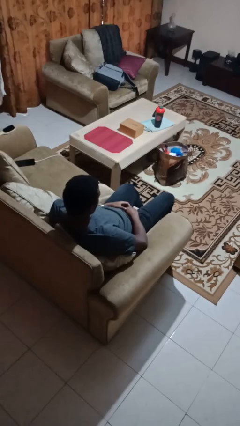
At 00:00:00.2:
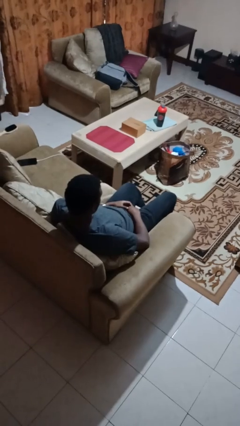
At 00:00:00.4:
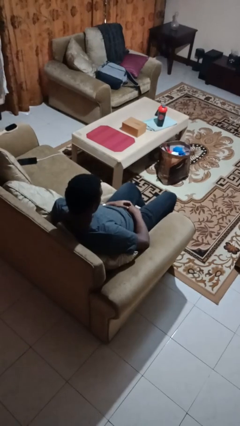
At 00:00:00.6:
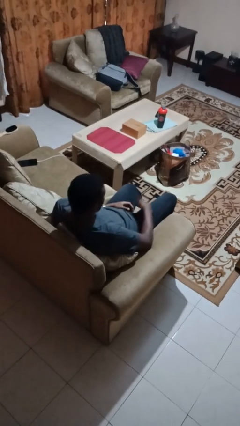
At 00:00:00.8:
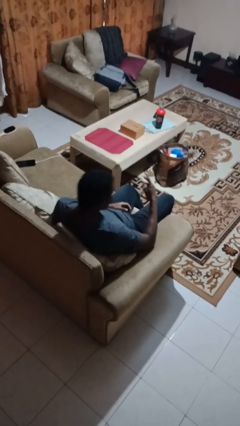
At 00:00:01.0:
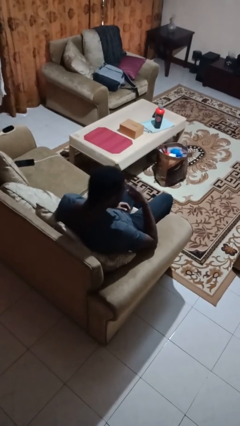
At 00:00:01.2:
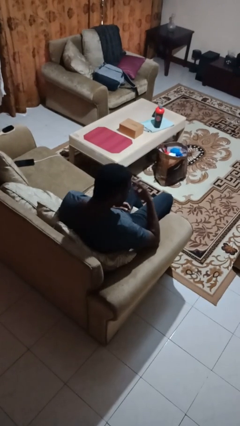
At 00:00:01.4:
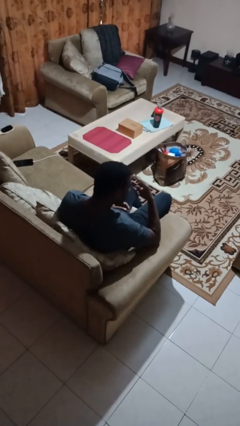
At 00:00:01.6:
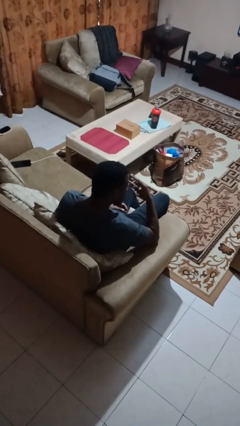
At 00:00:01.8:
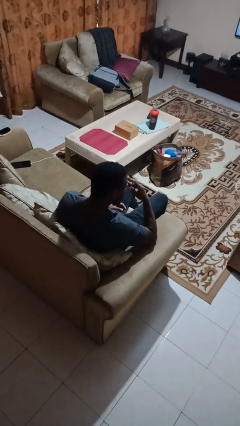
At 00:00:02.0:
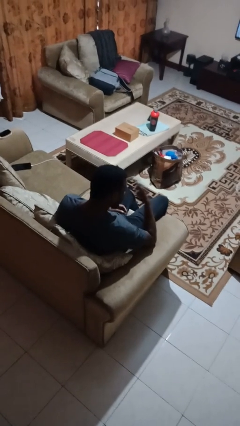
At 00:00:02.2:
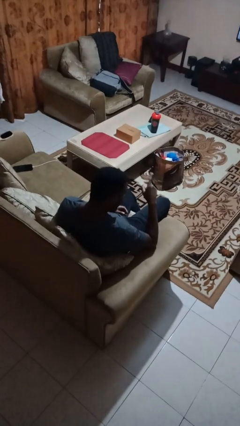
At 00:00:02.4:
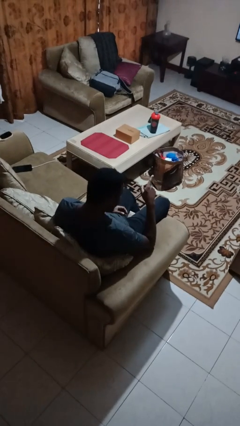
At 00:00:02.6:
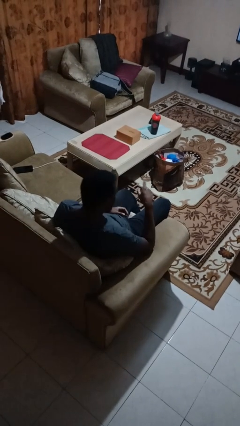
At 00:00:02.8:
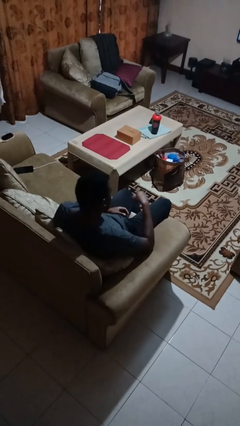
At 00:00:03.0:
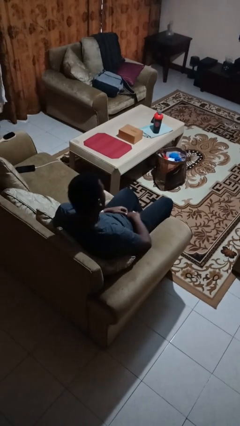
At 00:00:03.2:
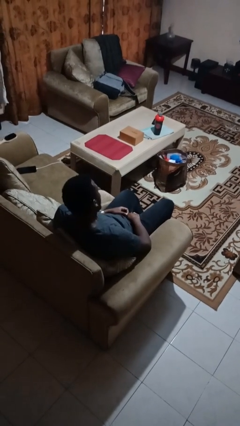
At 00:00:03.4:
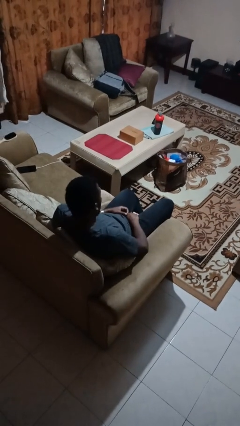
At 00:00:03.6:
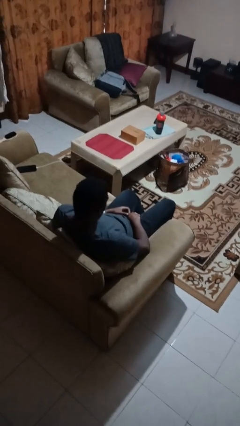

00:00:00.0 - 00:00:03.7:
person gestures watch closely

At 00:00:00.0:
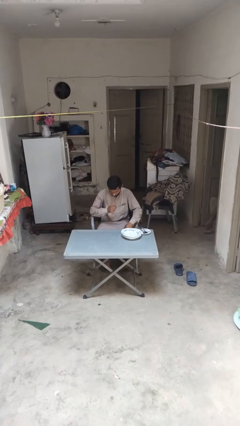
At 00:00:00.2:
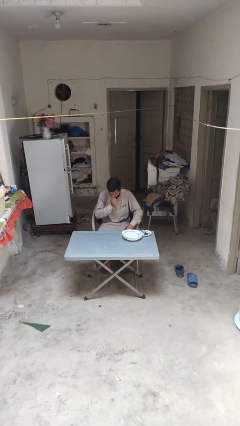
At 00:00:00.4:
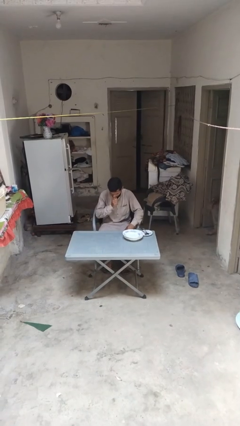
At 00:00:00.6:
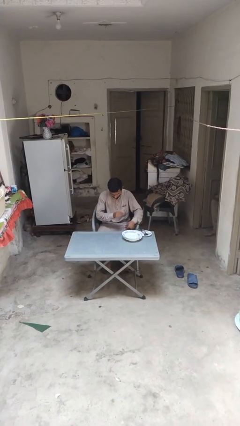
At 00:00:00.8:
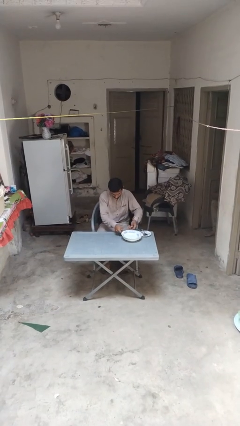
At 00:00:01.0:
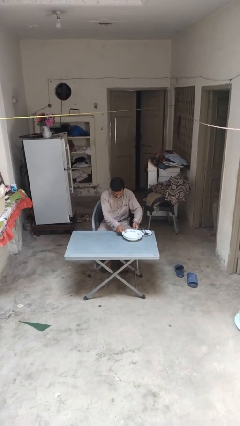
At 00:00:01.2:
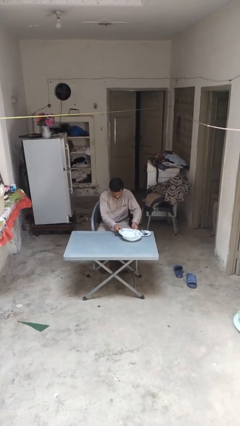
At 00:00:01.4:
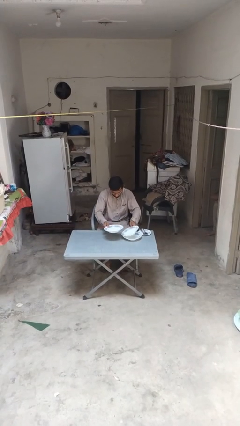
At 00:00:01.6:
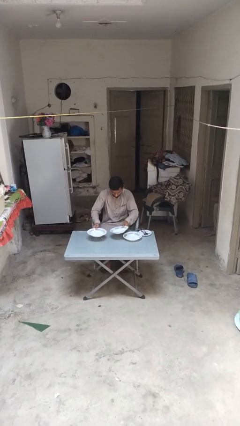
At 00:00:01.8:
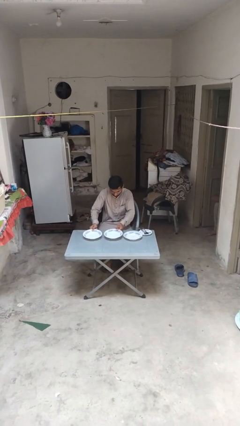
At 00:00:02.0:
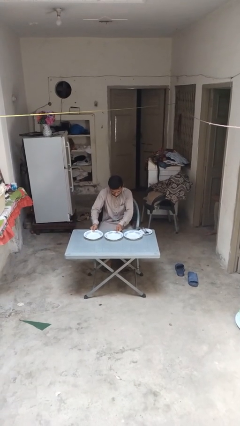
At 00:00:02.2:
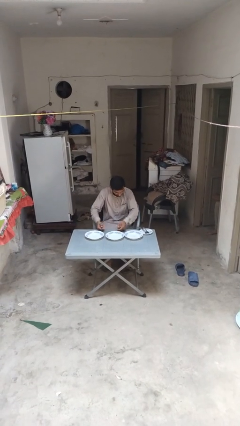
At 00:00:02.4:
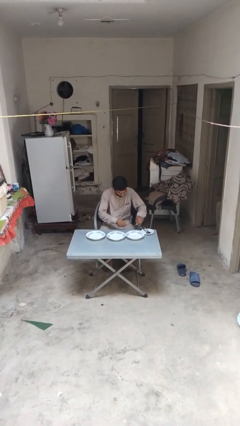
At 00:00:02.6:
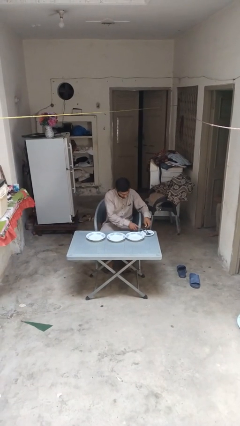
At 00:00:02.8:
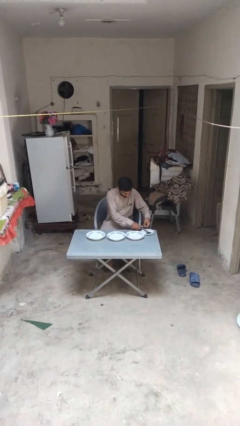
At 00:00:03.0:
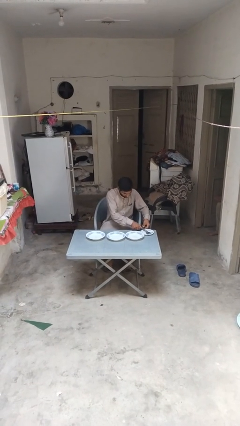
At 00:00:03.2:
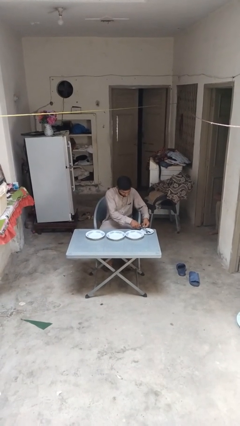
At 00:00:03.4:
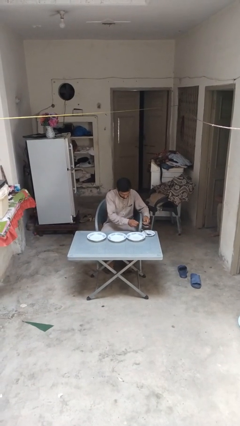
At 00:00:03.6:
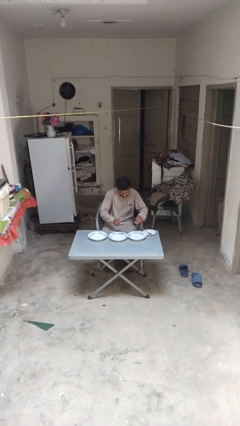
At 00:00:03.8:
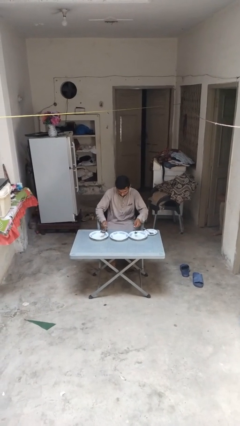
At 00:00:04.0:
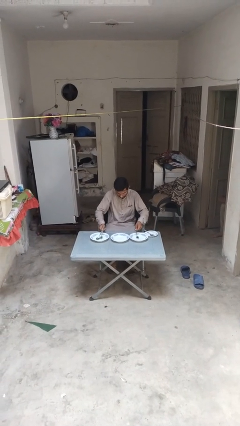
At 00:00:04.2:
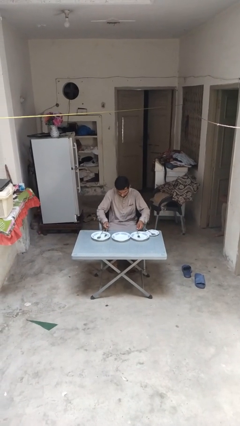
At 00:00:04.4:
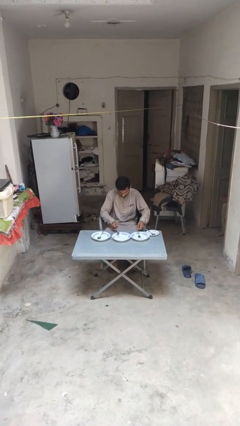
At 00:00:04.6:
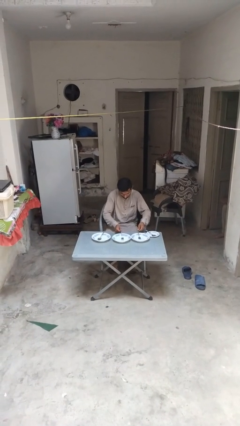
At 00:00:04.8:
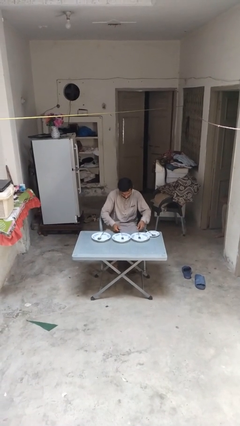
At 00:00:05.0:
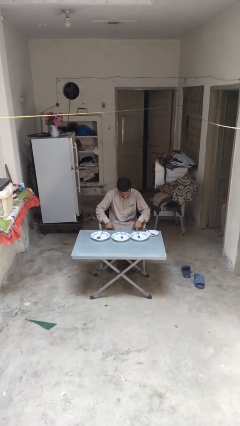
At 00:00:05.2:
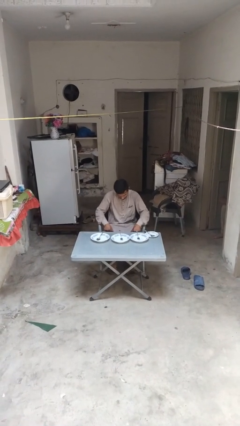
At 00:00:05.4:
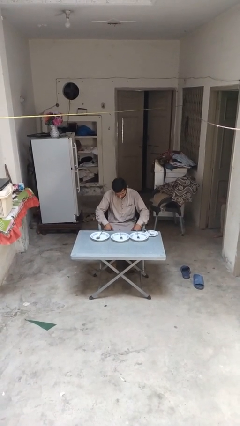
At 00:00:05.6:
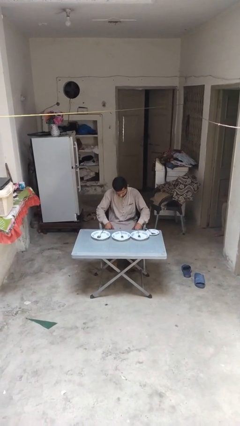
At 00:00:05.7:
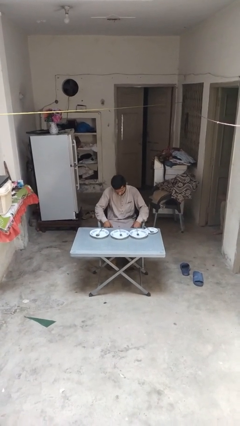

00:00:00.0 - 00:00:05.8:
person sets table

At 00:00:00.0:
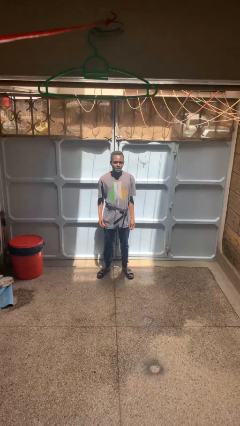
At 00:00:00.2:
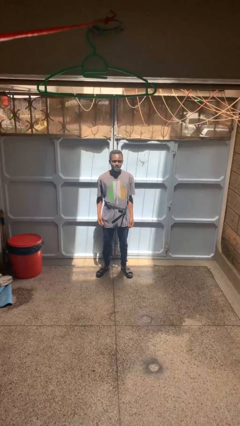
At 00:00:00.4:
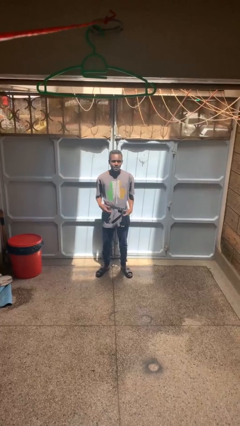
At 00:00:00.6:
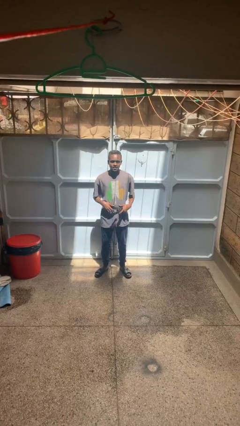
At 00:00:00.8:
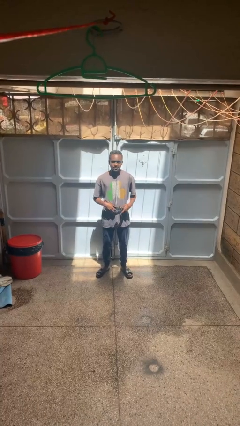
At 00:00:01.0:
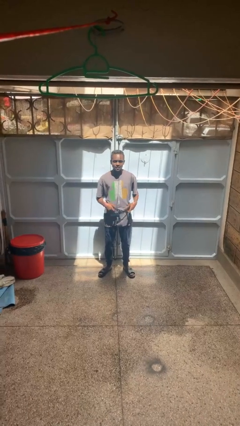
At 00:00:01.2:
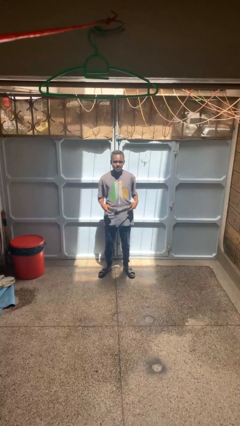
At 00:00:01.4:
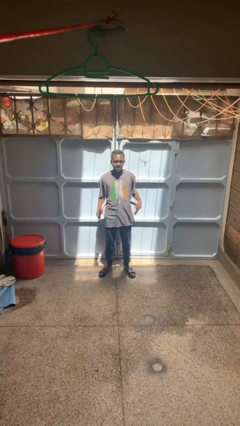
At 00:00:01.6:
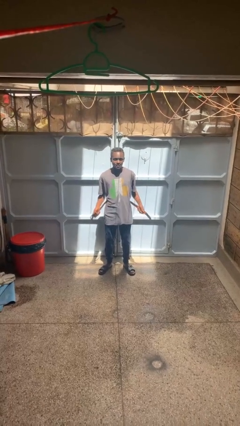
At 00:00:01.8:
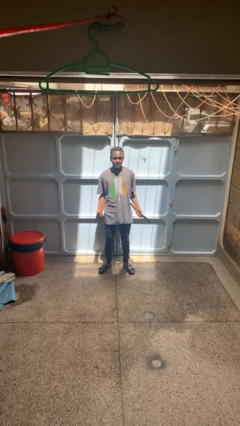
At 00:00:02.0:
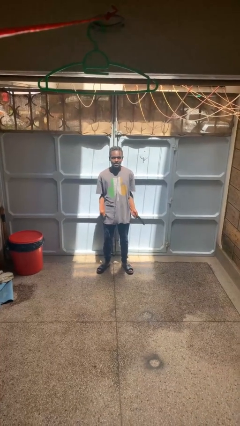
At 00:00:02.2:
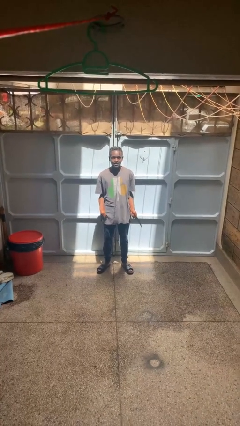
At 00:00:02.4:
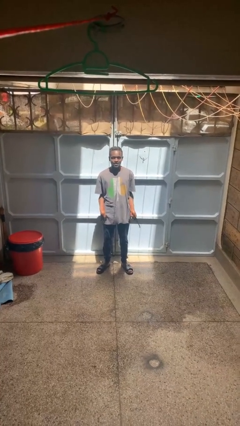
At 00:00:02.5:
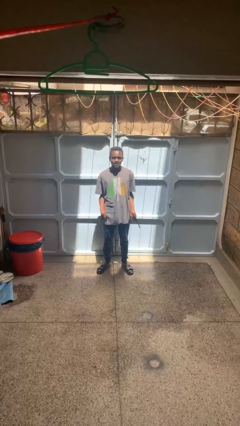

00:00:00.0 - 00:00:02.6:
person takes off belt

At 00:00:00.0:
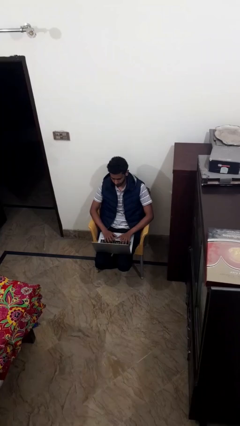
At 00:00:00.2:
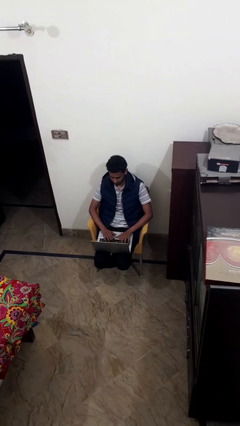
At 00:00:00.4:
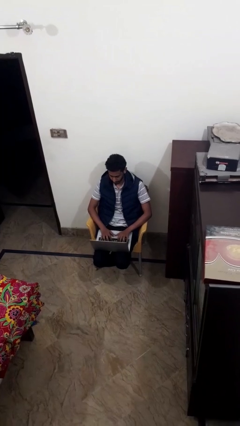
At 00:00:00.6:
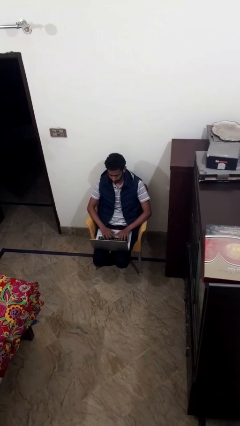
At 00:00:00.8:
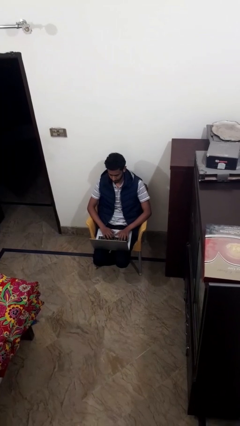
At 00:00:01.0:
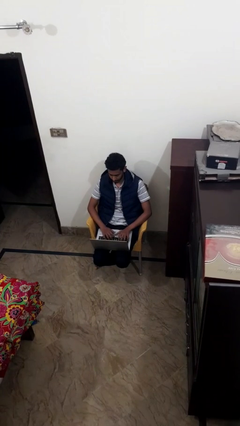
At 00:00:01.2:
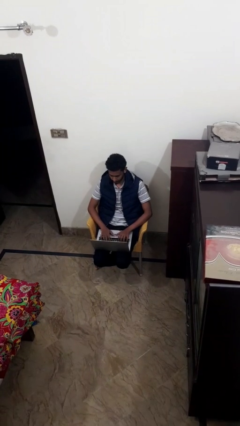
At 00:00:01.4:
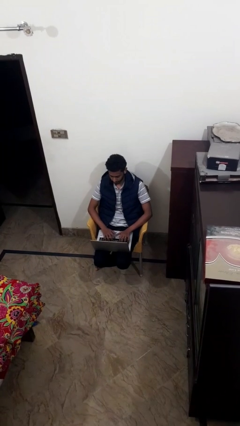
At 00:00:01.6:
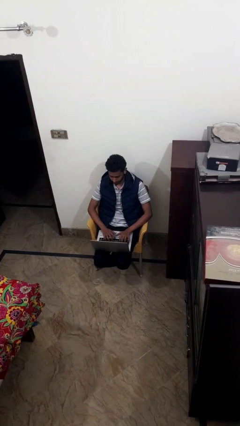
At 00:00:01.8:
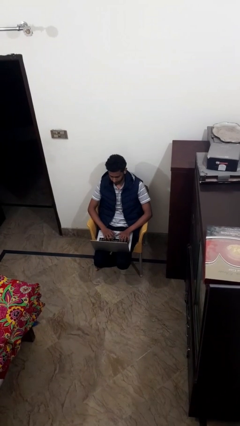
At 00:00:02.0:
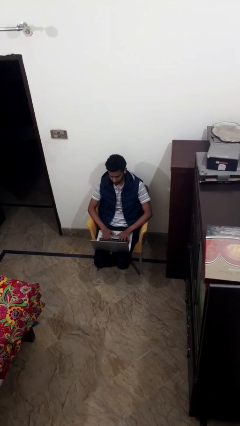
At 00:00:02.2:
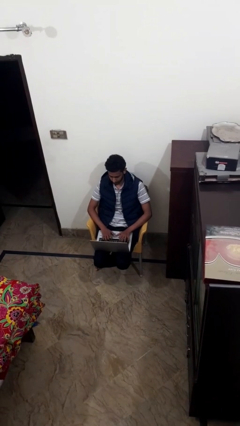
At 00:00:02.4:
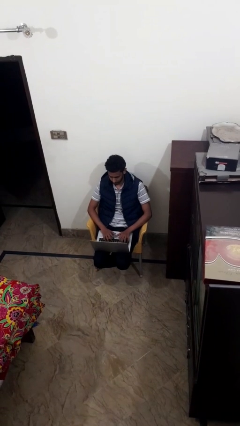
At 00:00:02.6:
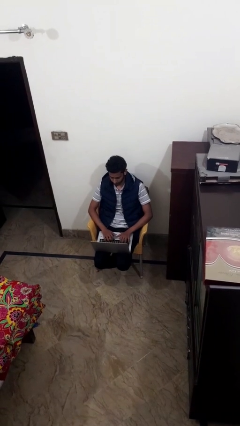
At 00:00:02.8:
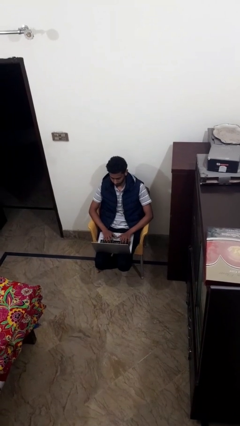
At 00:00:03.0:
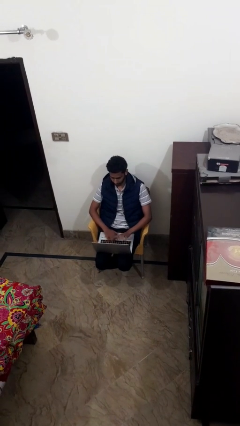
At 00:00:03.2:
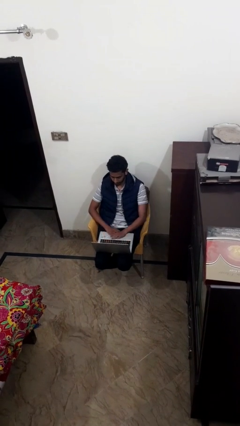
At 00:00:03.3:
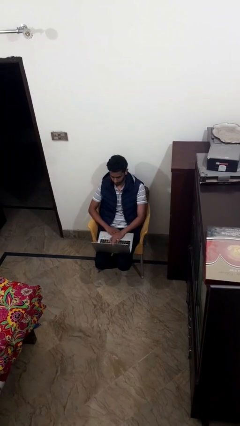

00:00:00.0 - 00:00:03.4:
person interacts with laptop

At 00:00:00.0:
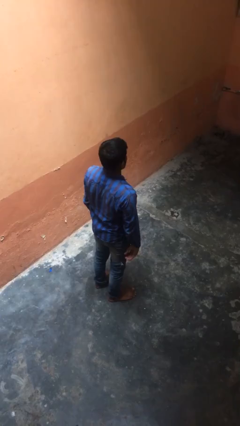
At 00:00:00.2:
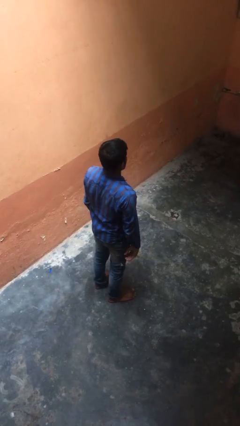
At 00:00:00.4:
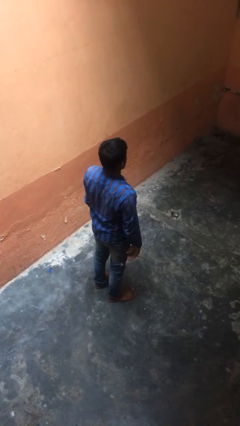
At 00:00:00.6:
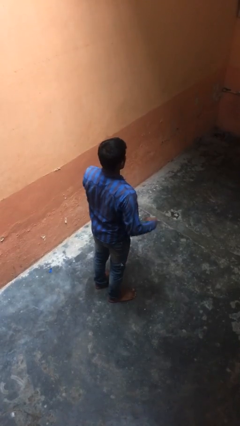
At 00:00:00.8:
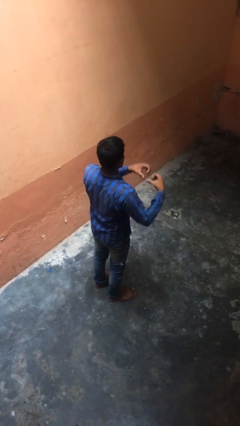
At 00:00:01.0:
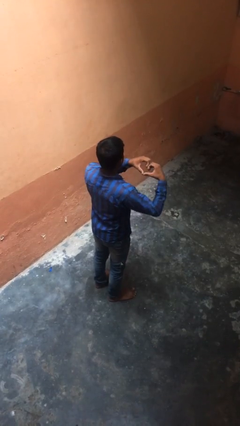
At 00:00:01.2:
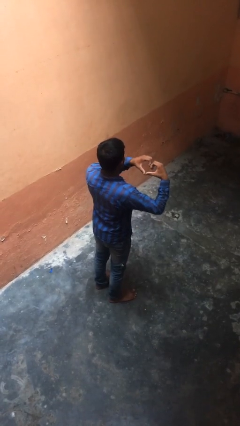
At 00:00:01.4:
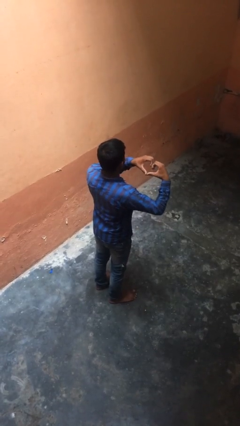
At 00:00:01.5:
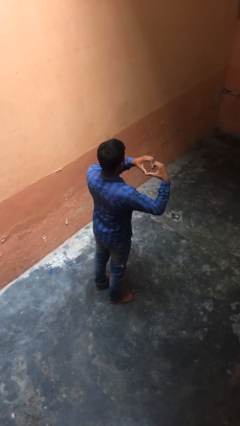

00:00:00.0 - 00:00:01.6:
person gestures heart

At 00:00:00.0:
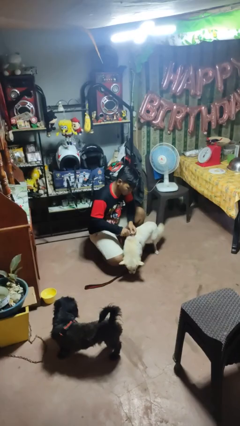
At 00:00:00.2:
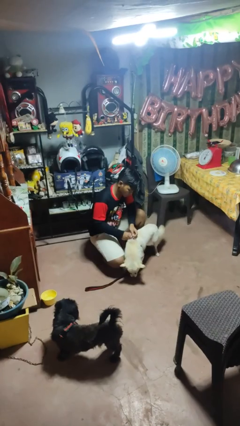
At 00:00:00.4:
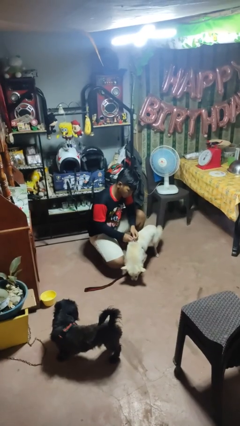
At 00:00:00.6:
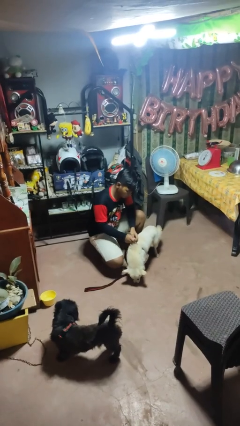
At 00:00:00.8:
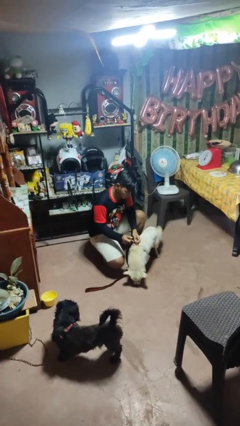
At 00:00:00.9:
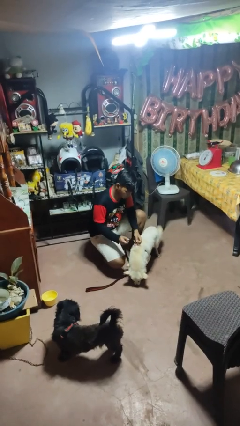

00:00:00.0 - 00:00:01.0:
person unattaches leash from dog
